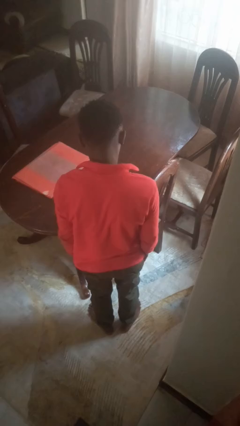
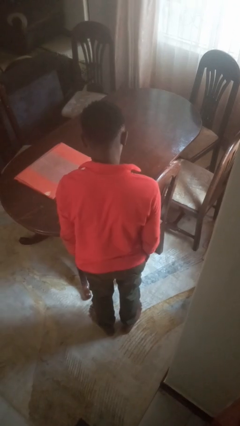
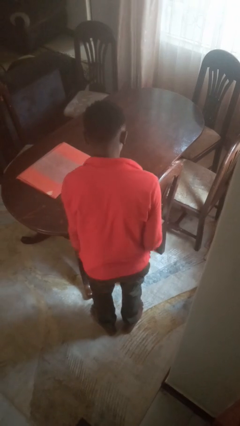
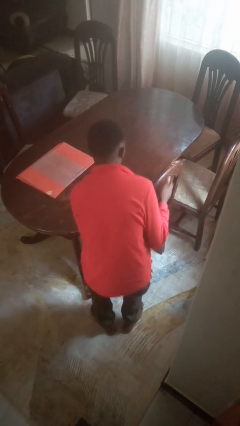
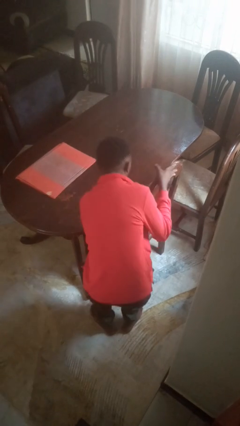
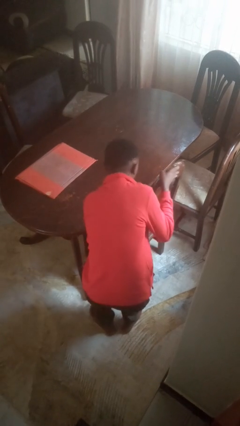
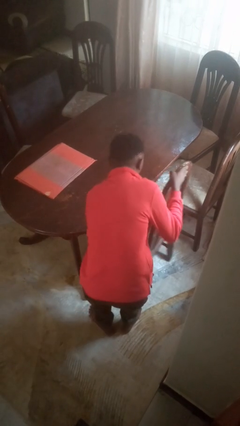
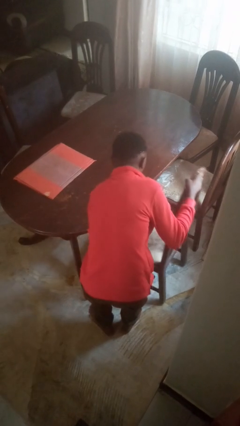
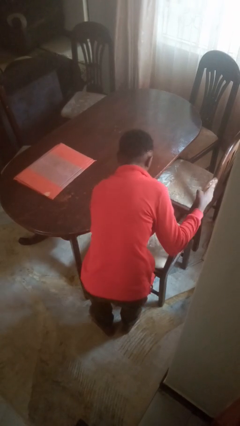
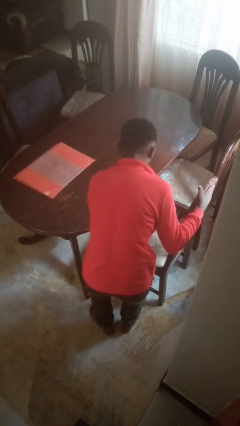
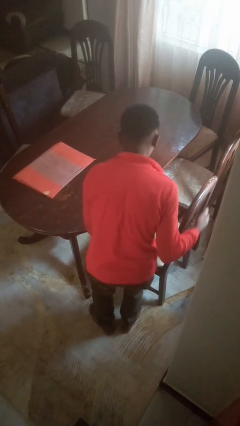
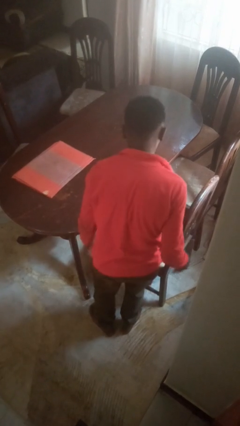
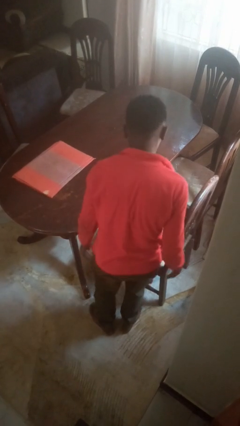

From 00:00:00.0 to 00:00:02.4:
person pulls out chair

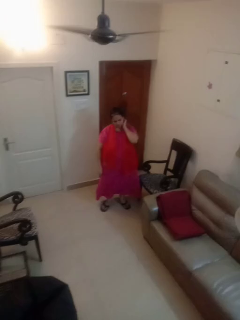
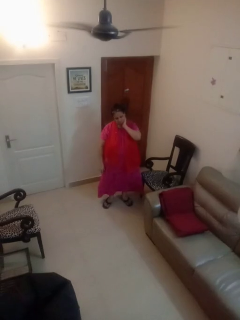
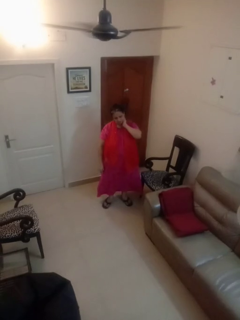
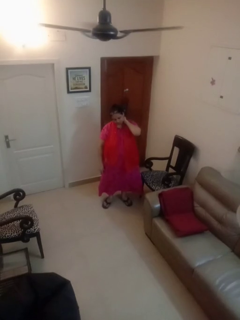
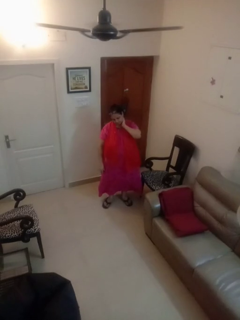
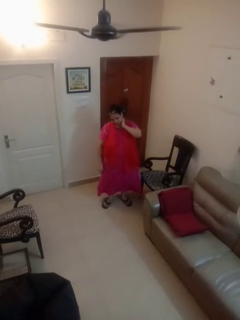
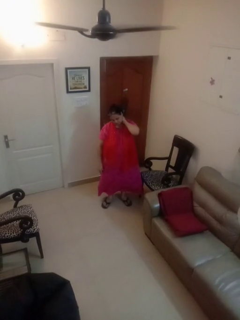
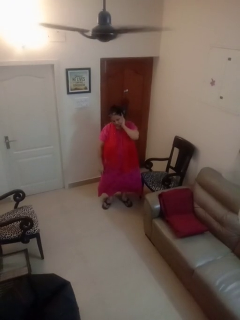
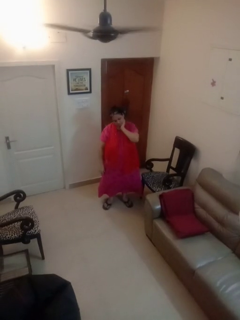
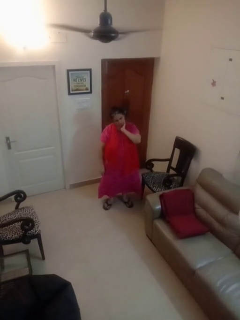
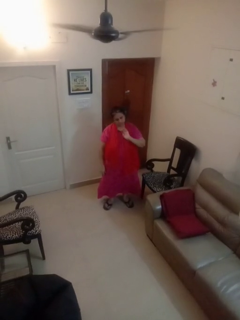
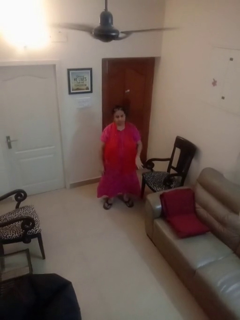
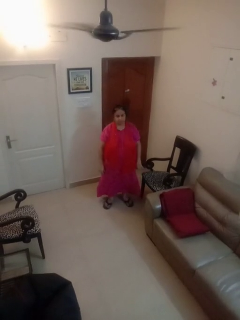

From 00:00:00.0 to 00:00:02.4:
person rubs neck

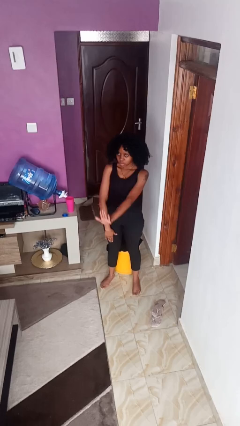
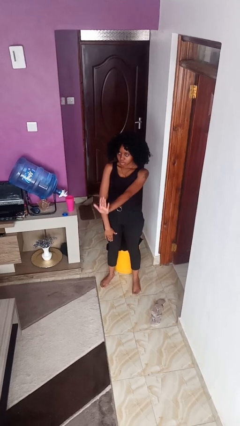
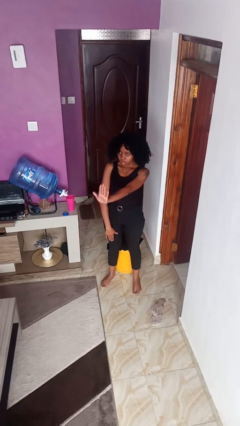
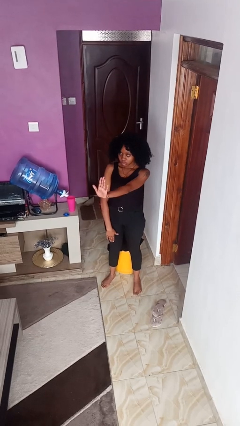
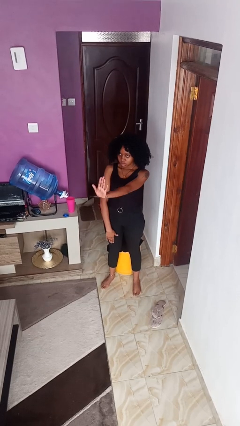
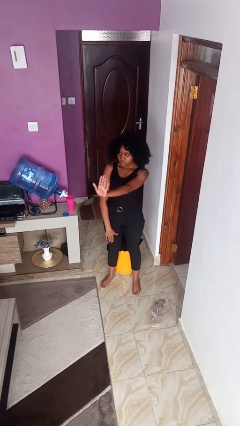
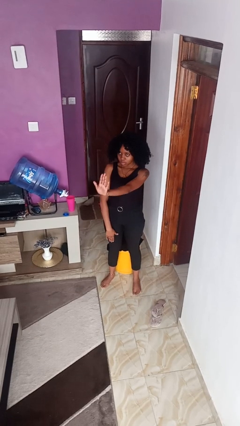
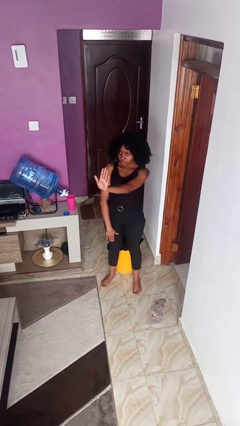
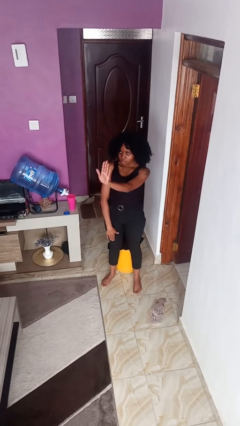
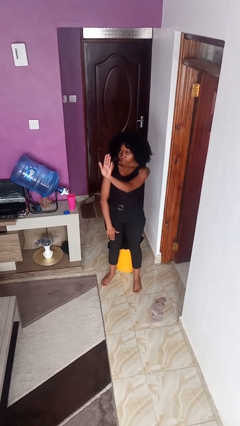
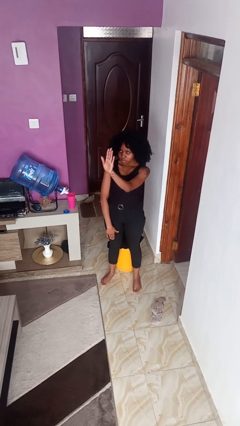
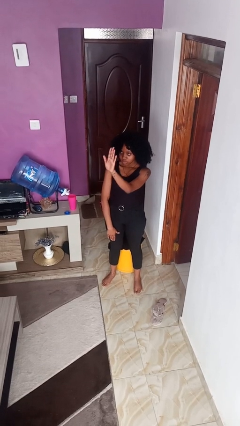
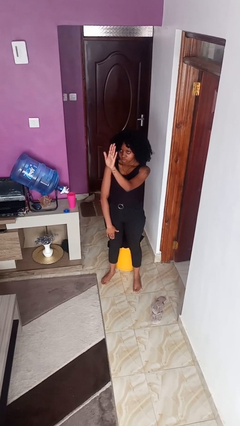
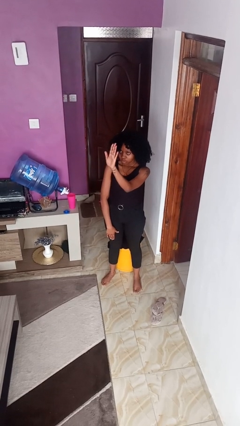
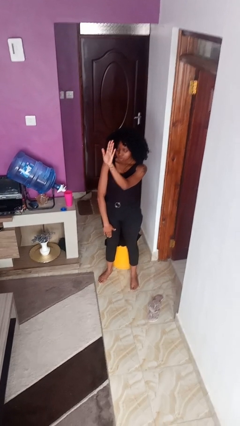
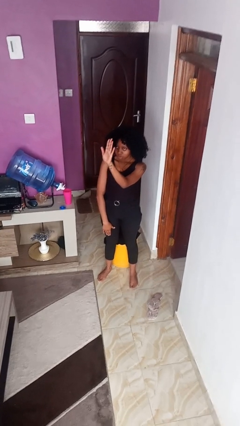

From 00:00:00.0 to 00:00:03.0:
person gestures swipe up

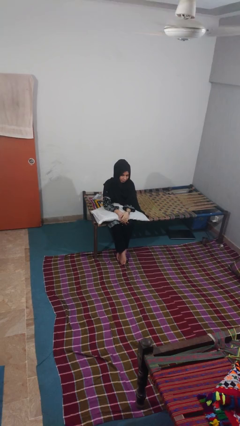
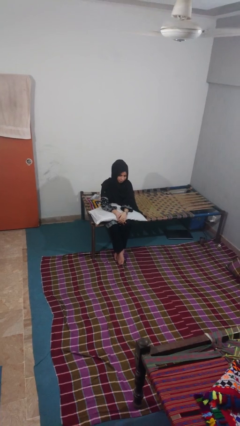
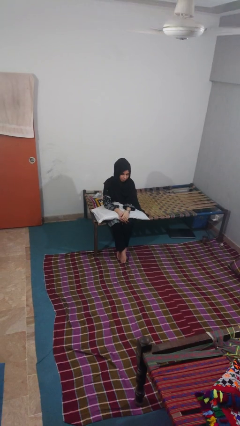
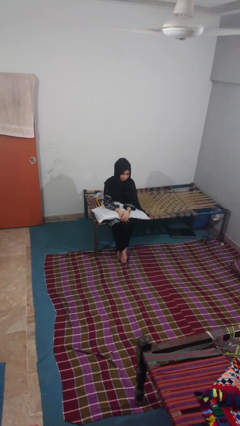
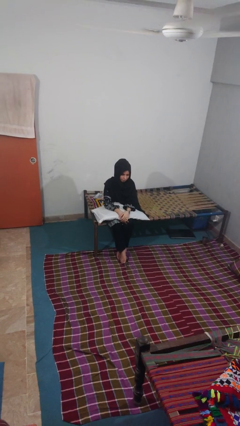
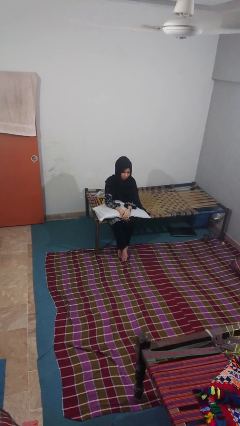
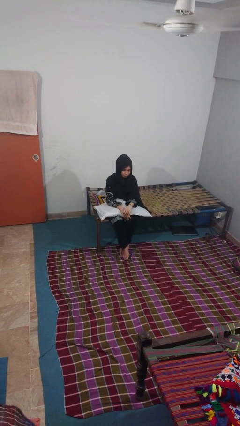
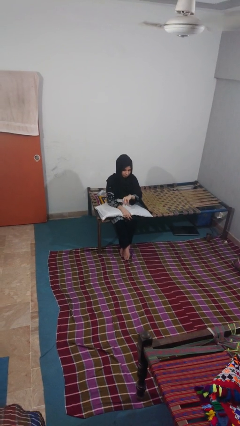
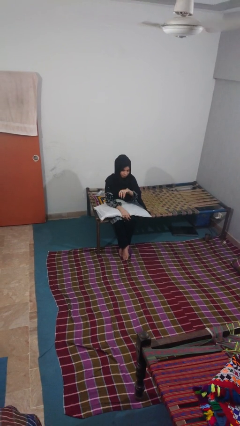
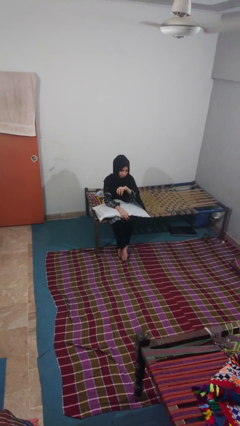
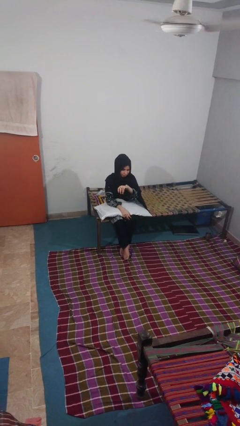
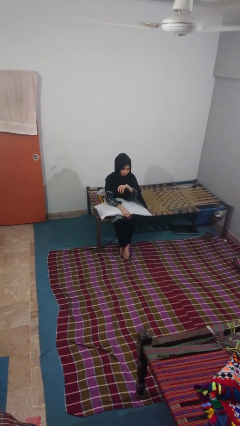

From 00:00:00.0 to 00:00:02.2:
person looks at wristwatch

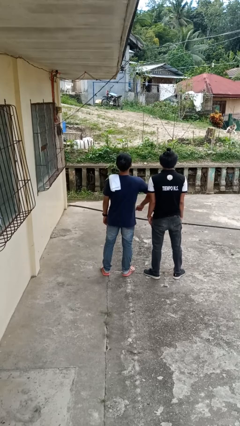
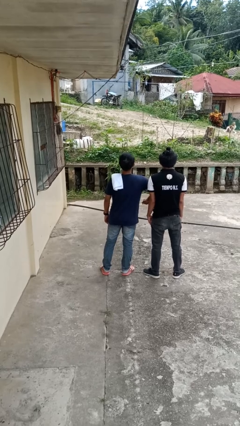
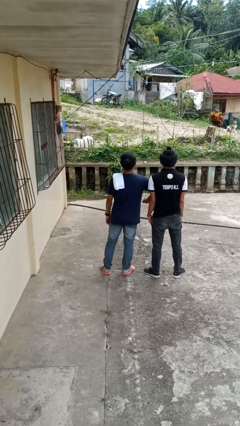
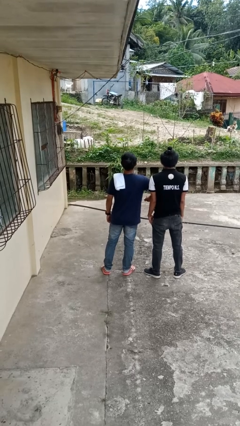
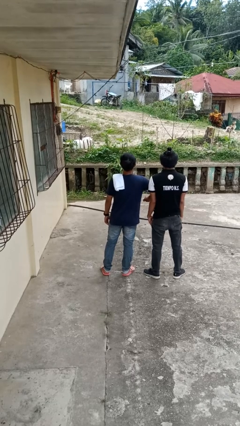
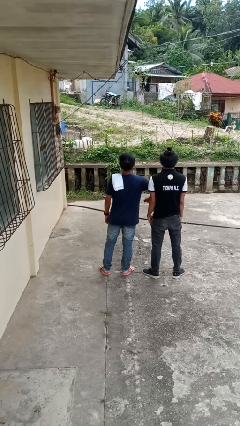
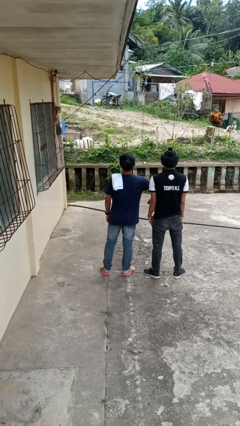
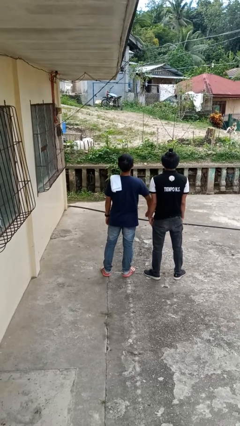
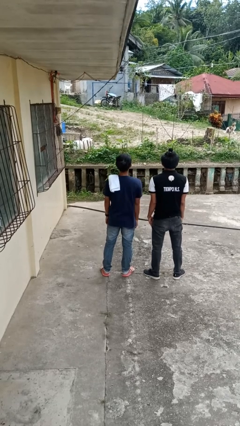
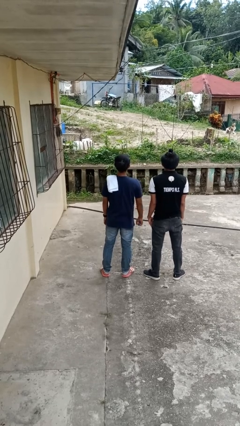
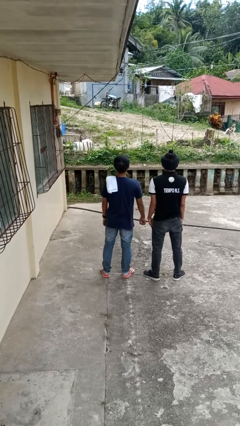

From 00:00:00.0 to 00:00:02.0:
person nudges person with elbow

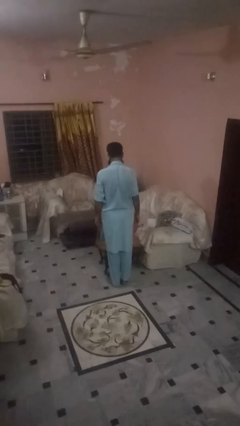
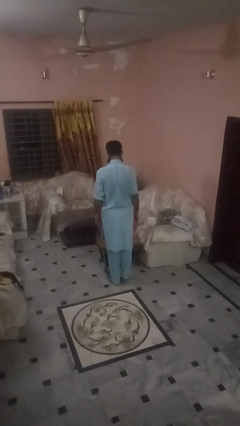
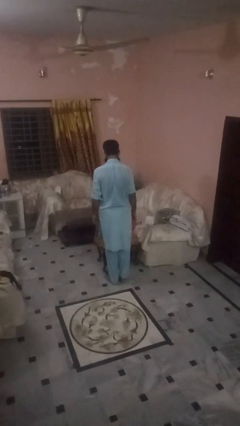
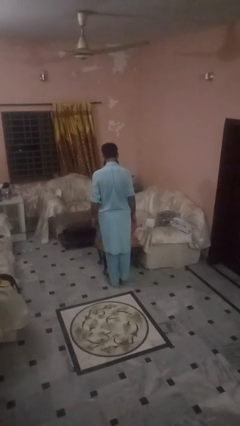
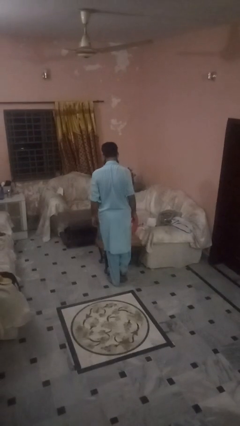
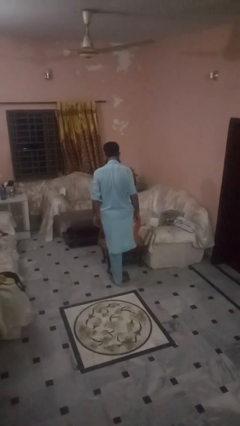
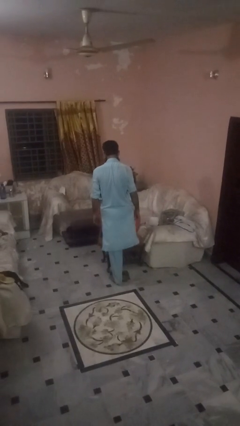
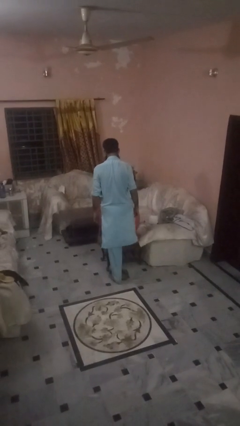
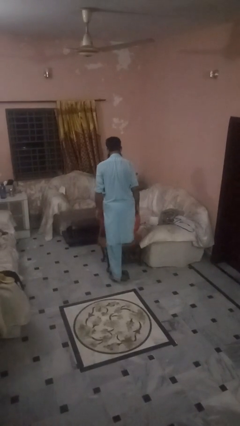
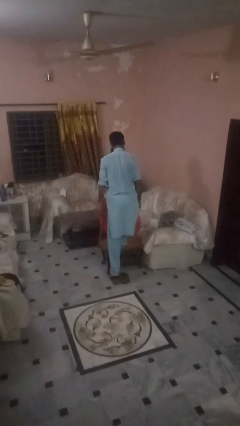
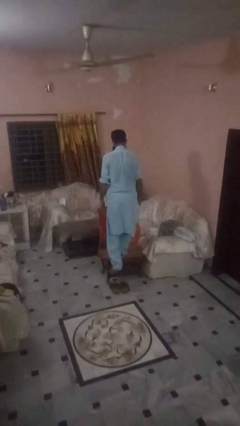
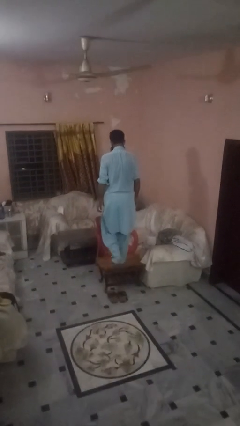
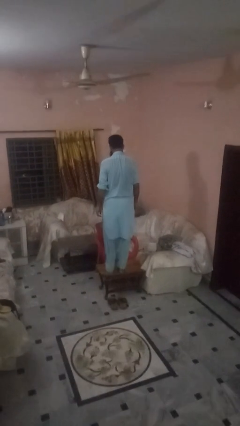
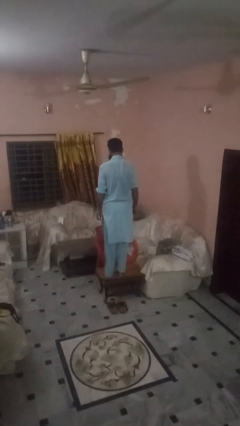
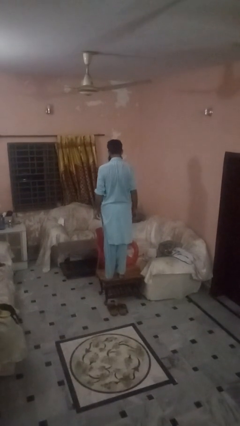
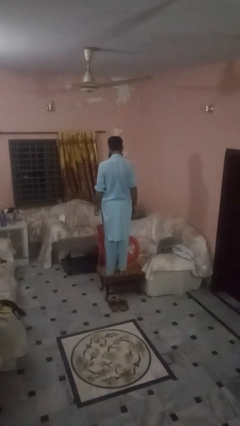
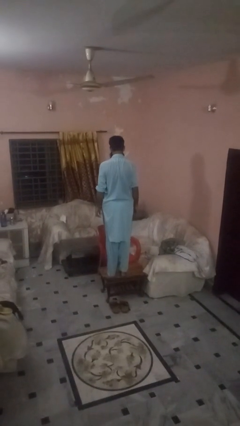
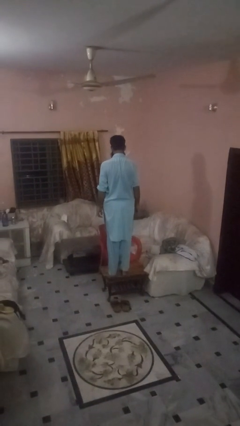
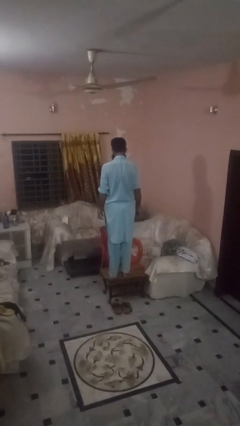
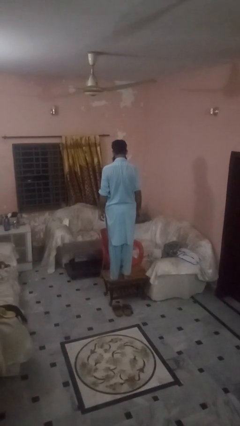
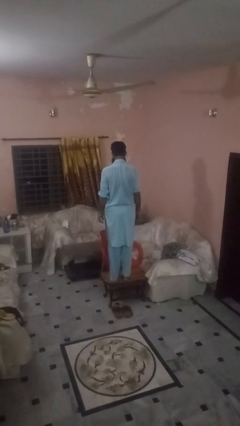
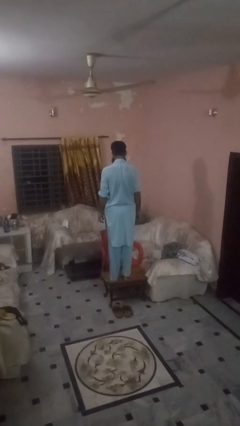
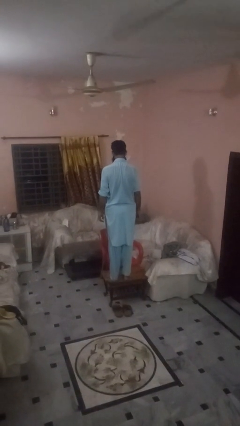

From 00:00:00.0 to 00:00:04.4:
person climbs on table

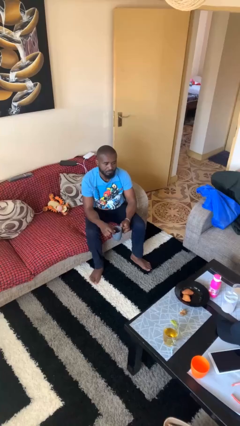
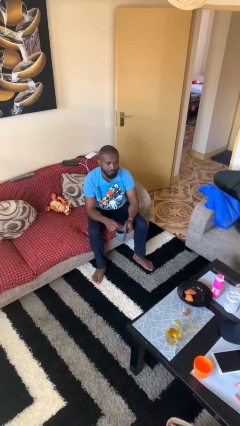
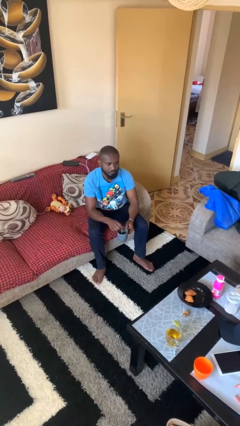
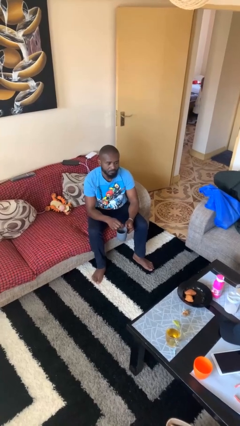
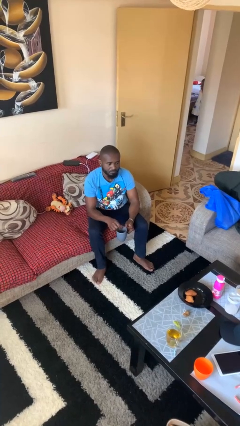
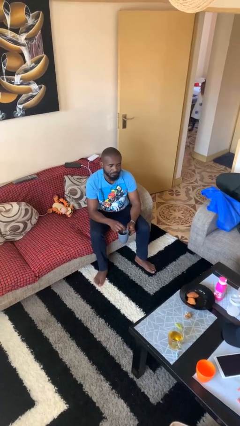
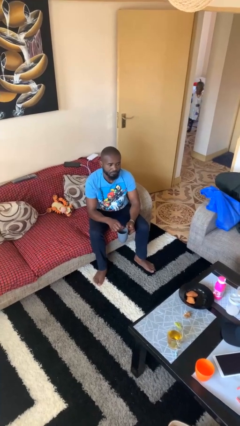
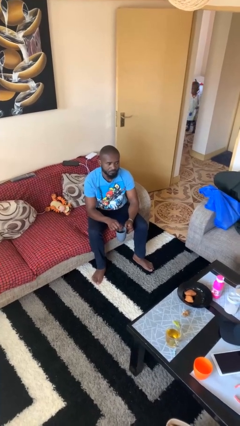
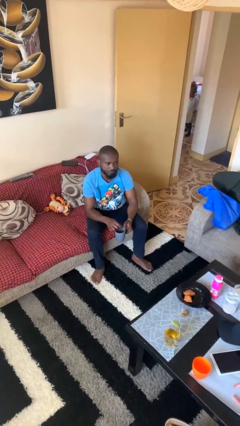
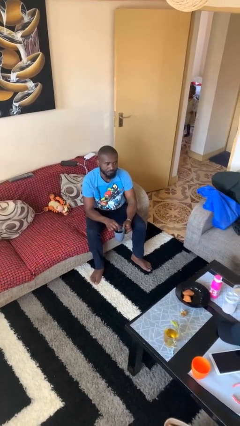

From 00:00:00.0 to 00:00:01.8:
person stirs mug
